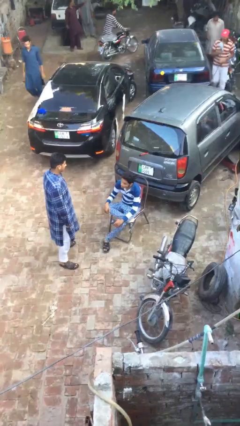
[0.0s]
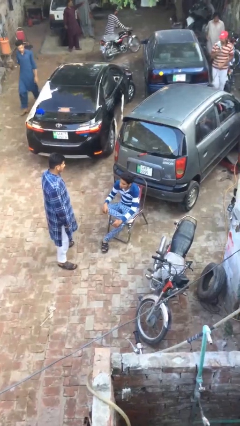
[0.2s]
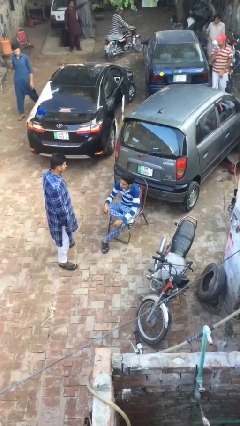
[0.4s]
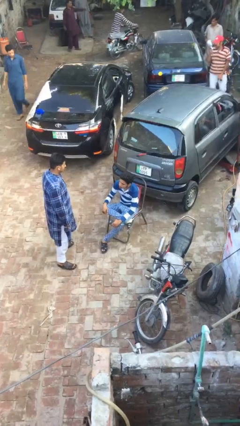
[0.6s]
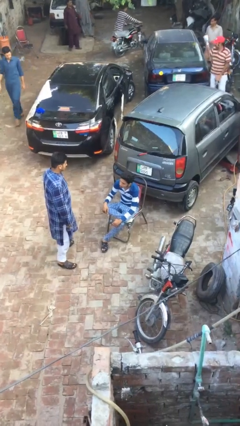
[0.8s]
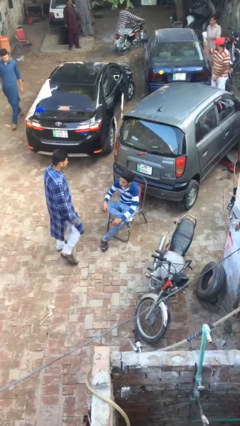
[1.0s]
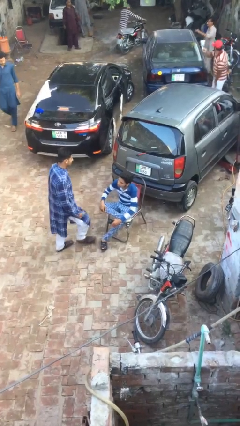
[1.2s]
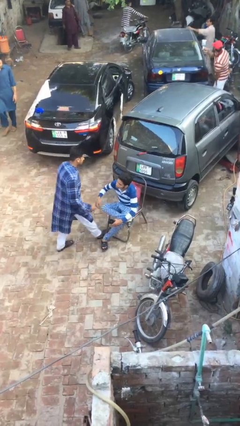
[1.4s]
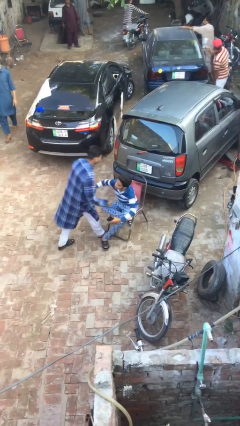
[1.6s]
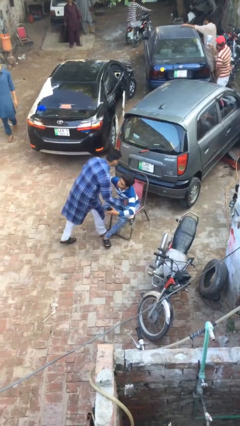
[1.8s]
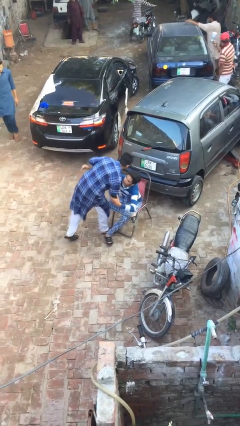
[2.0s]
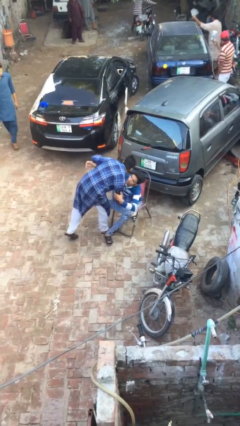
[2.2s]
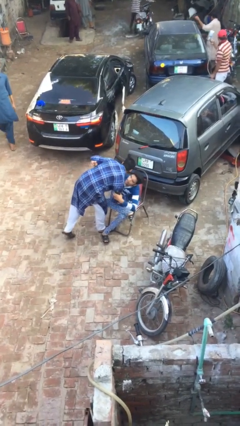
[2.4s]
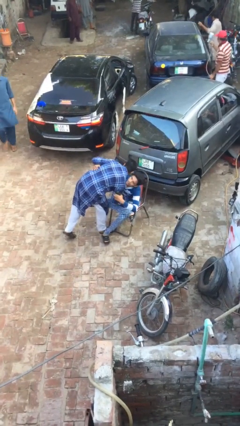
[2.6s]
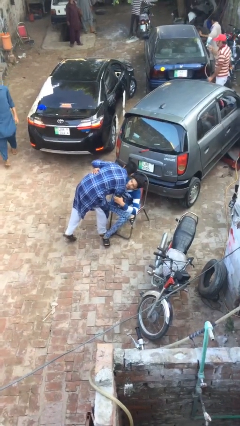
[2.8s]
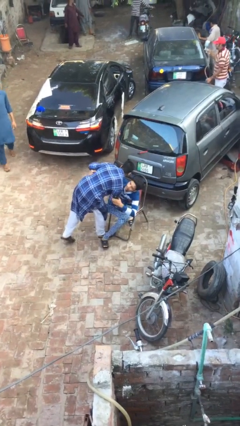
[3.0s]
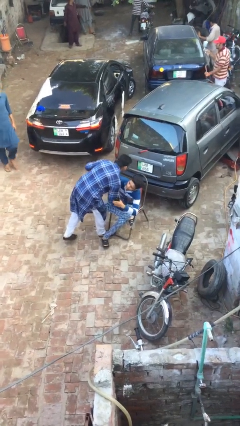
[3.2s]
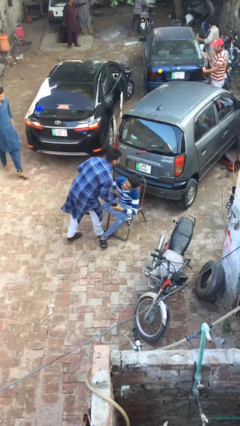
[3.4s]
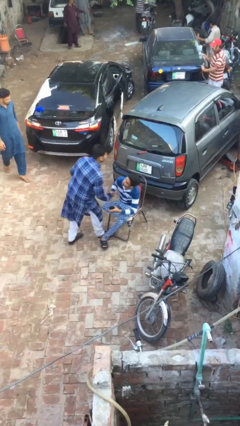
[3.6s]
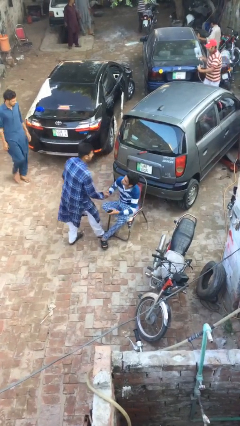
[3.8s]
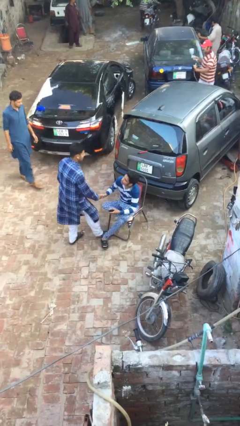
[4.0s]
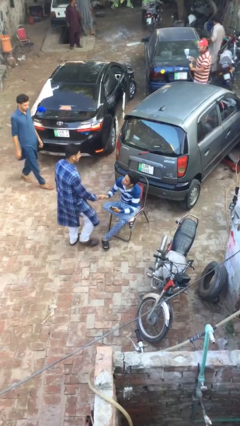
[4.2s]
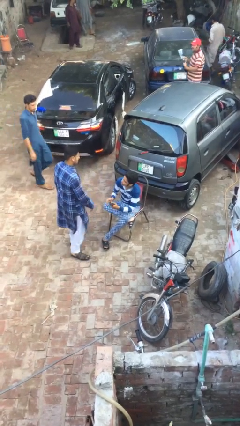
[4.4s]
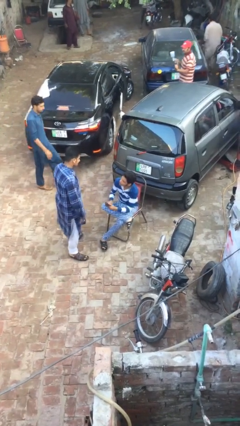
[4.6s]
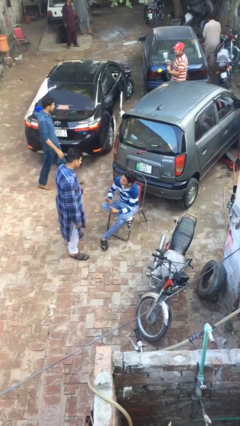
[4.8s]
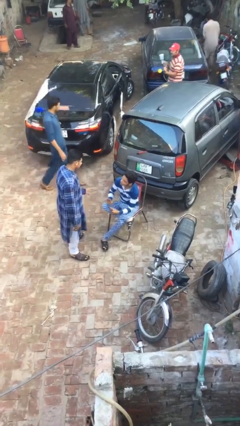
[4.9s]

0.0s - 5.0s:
person embraces person

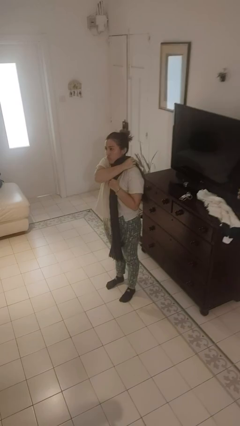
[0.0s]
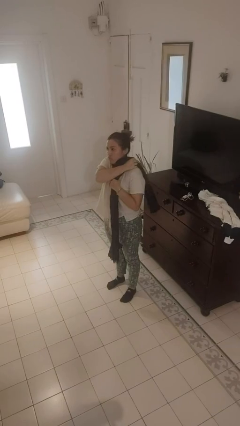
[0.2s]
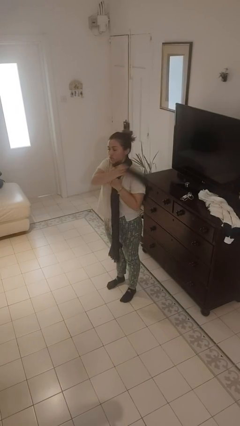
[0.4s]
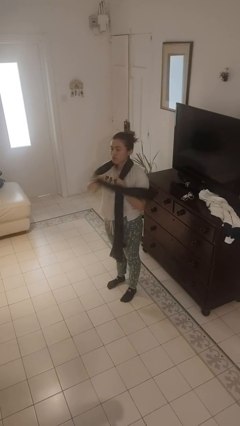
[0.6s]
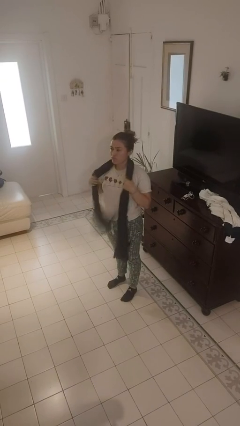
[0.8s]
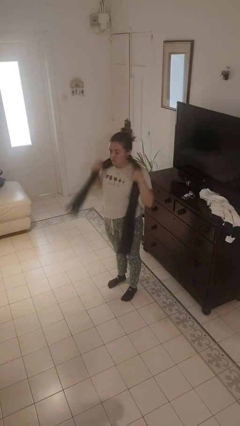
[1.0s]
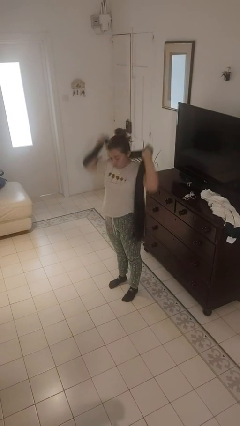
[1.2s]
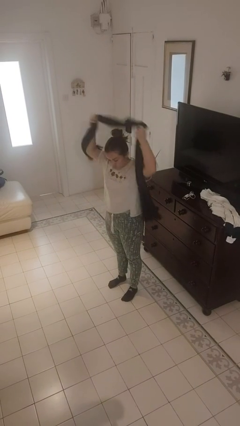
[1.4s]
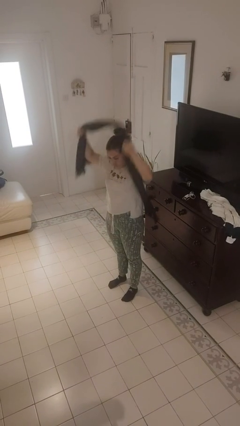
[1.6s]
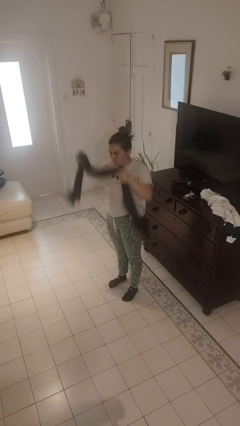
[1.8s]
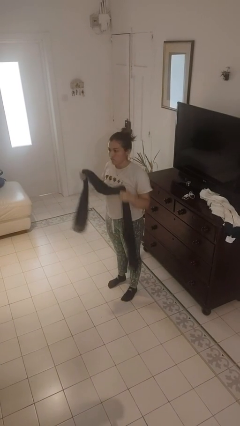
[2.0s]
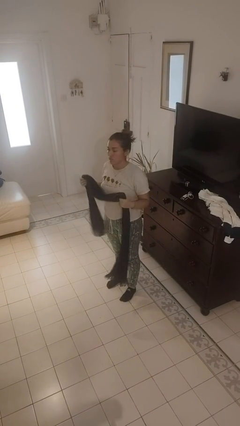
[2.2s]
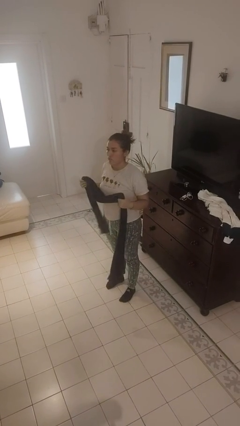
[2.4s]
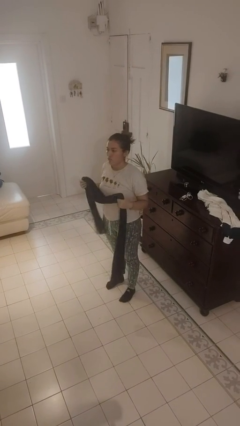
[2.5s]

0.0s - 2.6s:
person takes off scarf

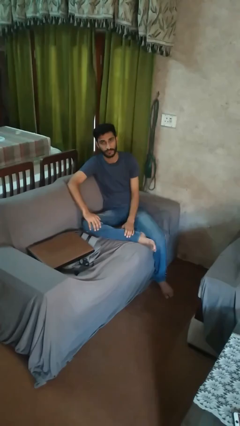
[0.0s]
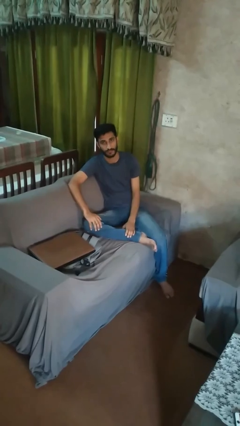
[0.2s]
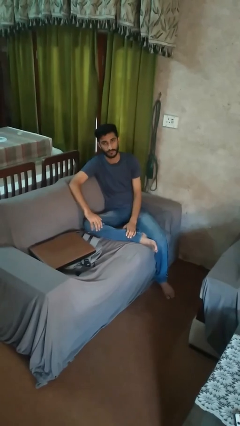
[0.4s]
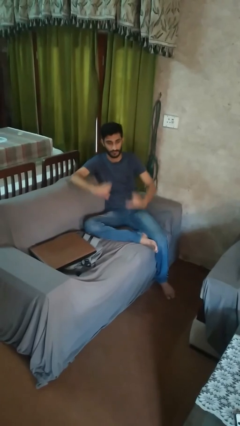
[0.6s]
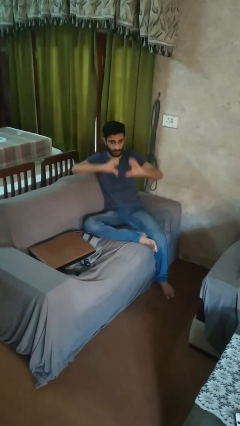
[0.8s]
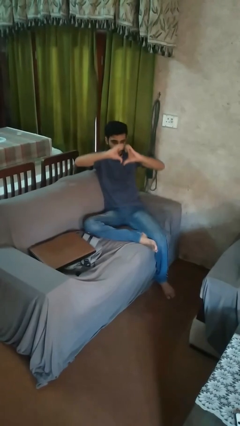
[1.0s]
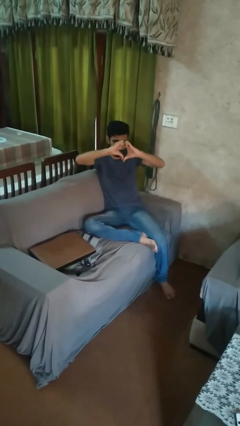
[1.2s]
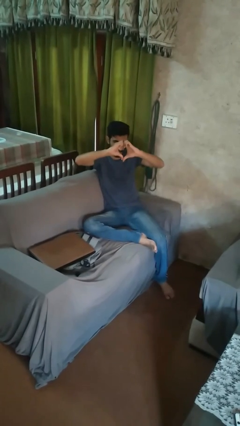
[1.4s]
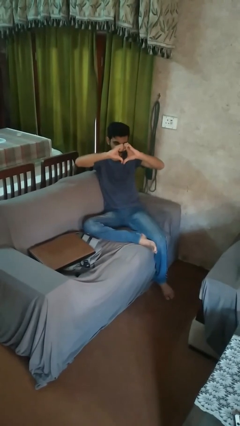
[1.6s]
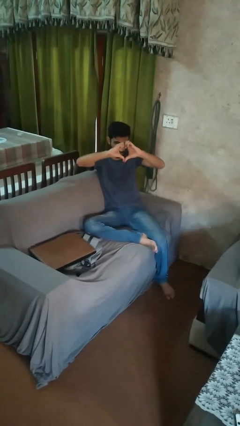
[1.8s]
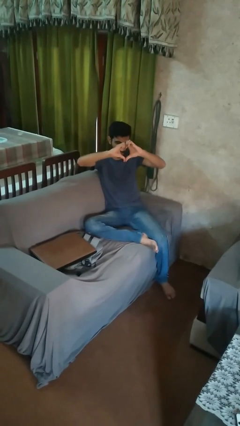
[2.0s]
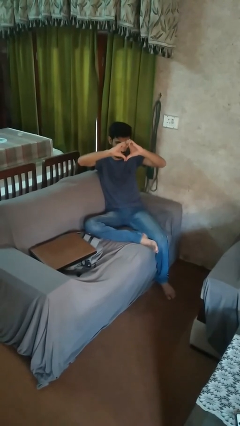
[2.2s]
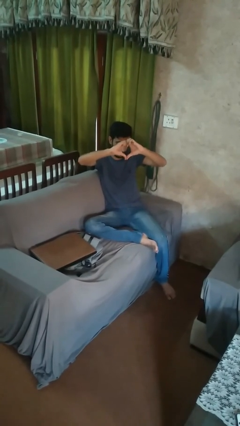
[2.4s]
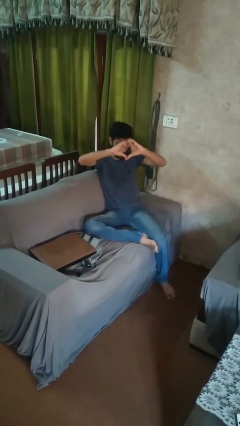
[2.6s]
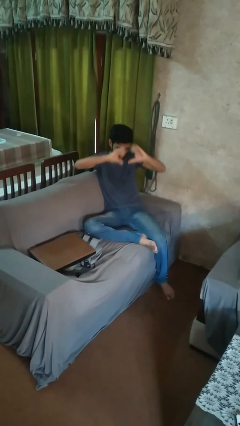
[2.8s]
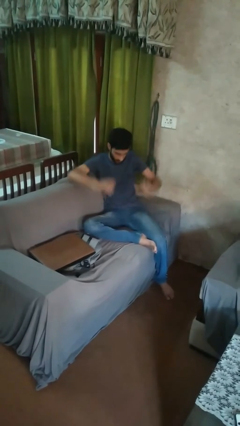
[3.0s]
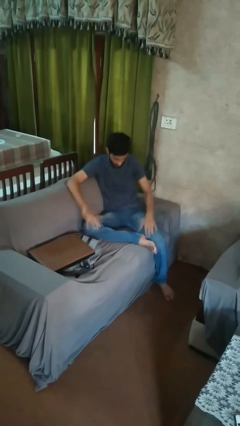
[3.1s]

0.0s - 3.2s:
person gestures heart

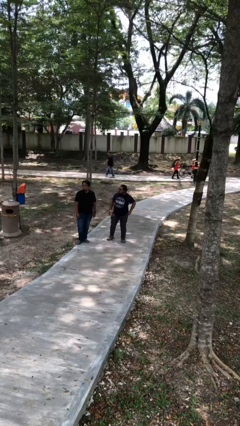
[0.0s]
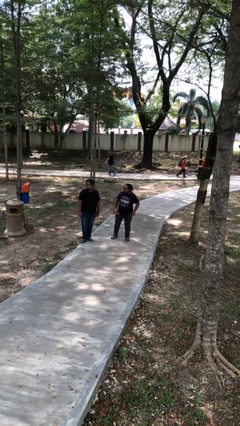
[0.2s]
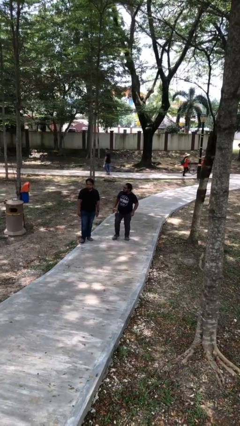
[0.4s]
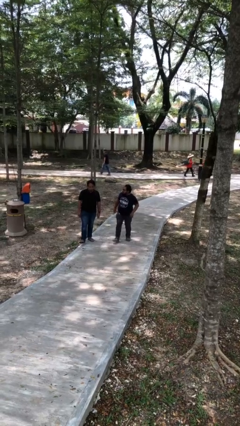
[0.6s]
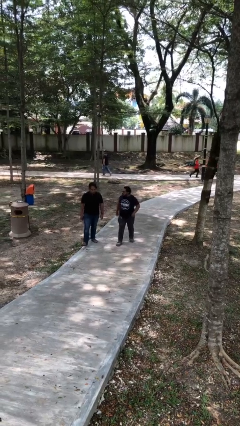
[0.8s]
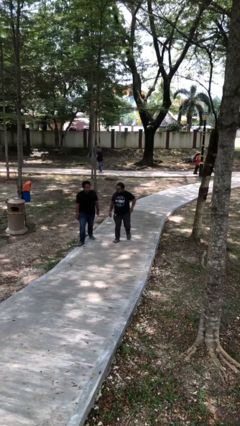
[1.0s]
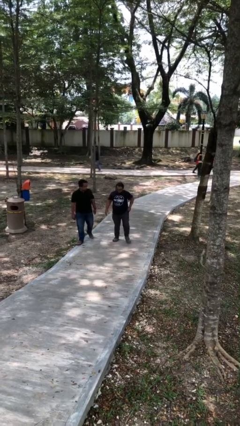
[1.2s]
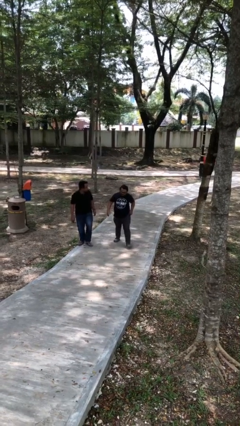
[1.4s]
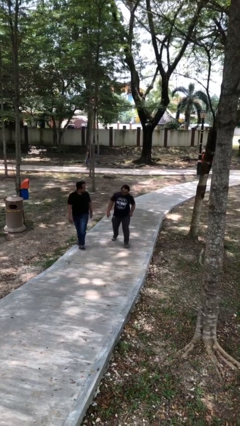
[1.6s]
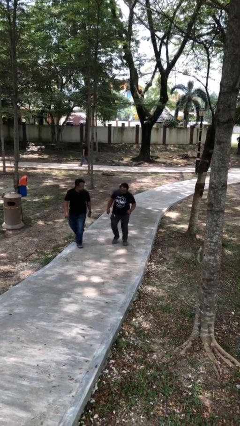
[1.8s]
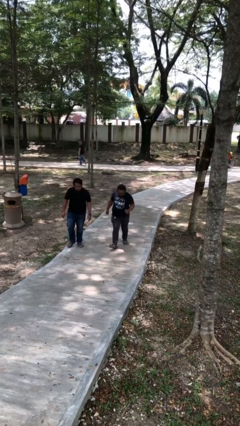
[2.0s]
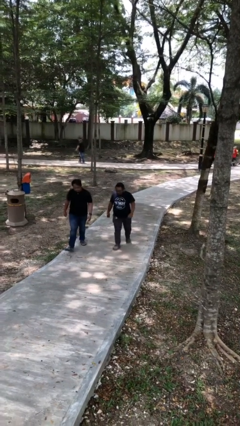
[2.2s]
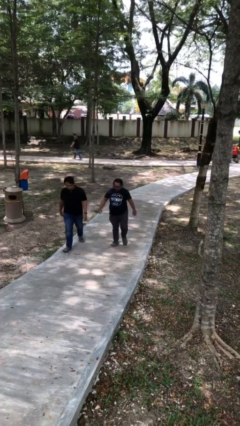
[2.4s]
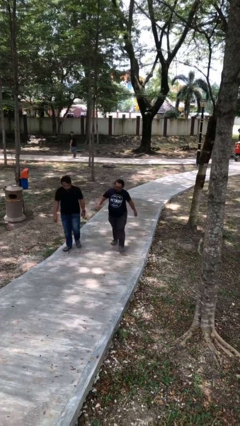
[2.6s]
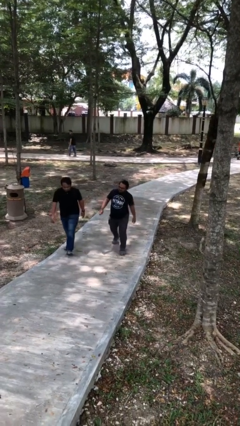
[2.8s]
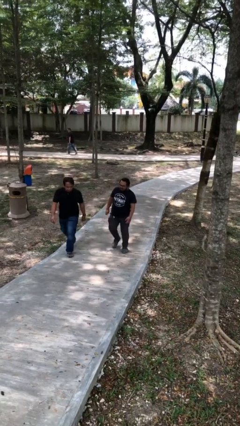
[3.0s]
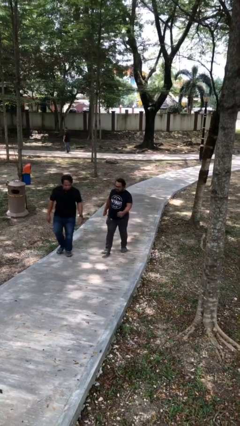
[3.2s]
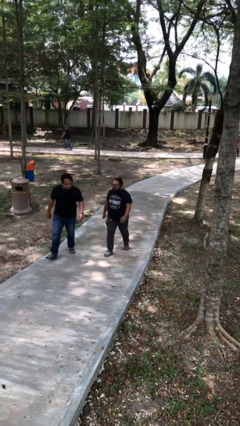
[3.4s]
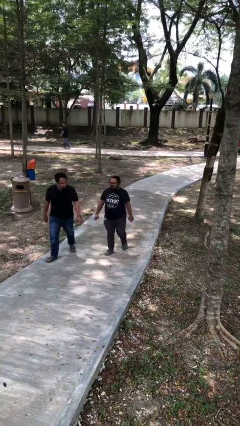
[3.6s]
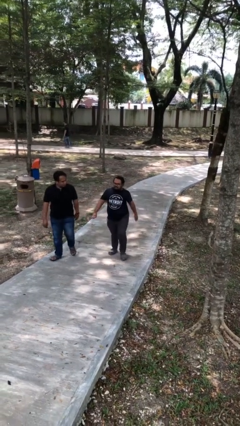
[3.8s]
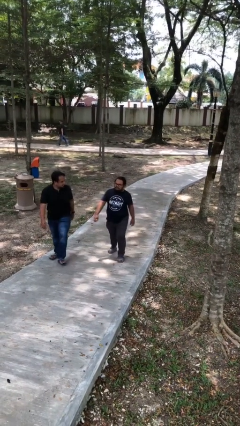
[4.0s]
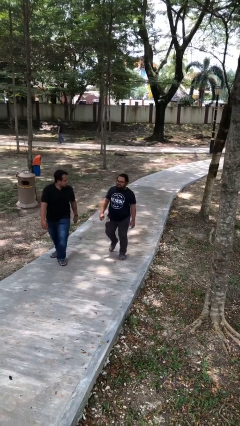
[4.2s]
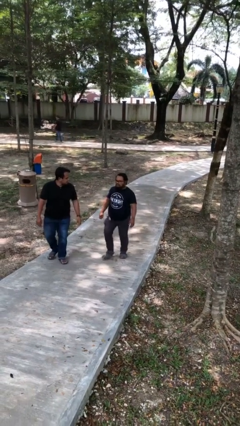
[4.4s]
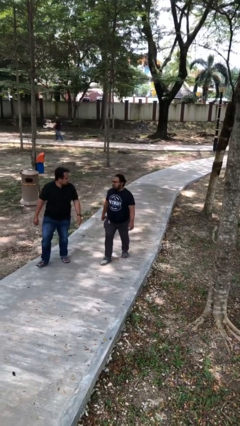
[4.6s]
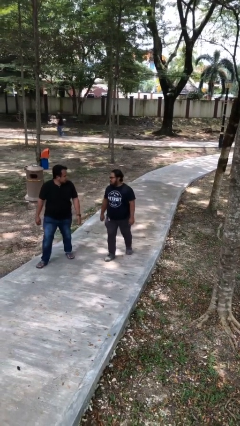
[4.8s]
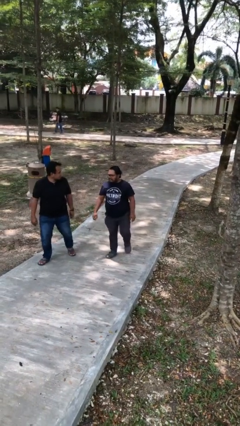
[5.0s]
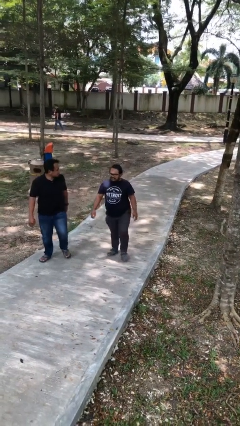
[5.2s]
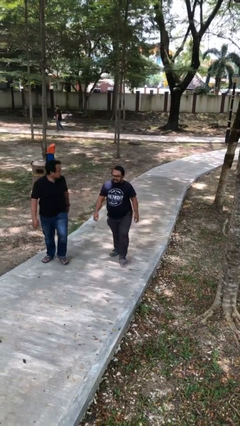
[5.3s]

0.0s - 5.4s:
person talks to person

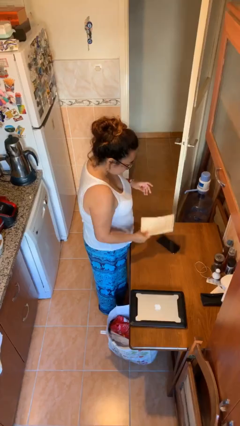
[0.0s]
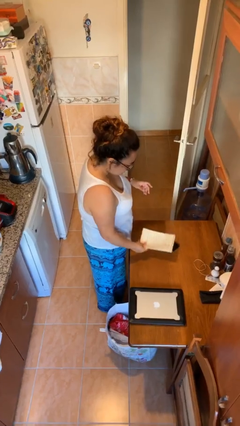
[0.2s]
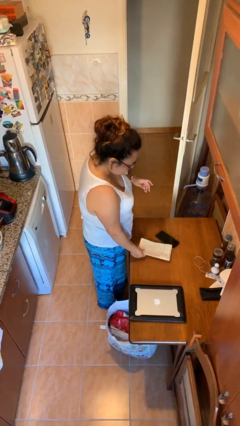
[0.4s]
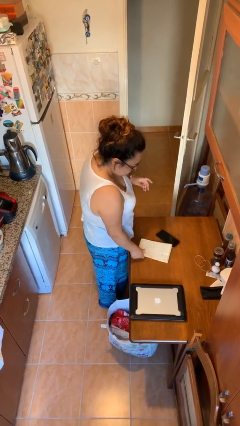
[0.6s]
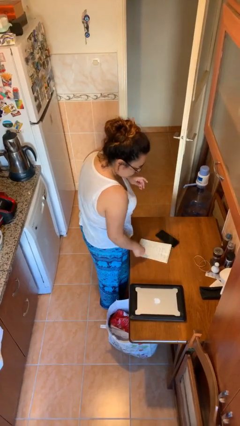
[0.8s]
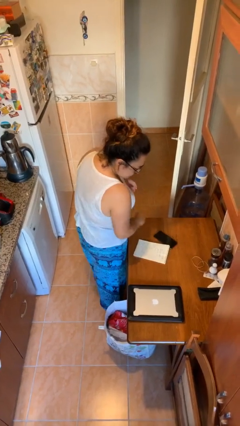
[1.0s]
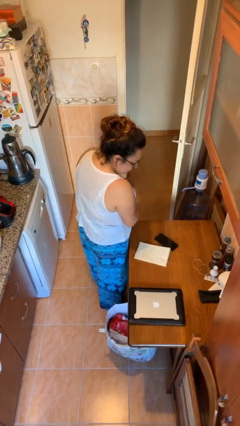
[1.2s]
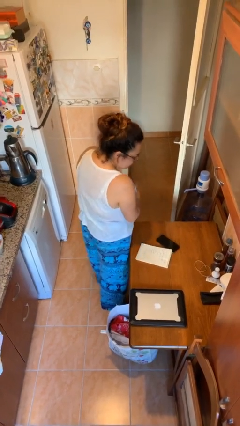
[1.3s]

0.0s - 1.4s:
person puts down object on table
